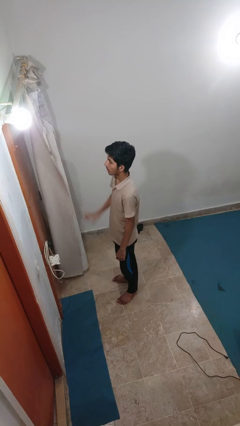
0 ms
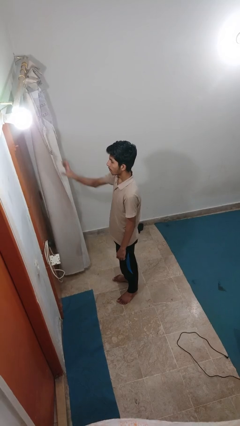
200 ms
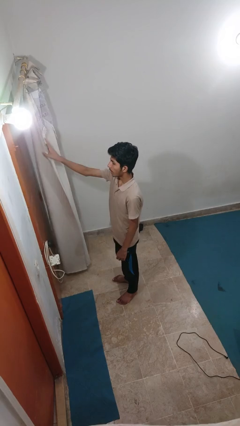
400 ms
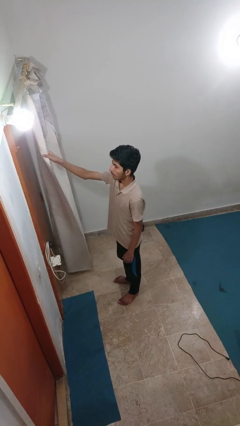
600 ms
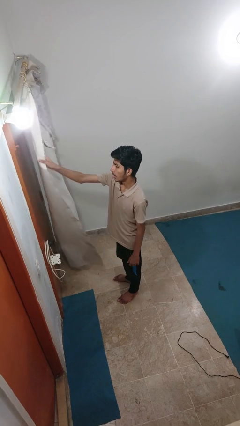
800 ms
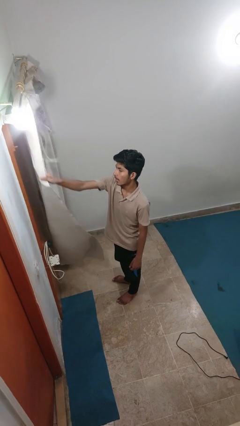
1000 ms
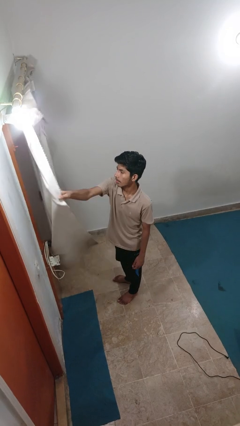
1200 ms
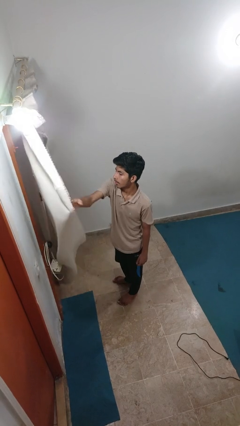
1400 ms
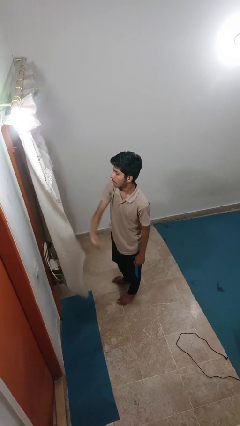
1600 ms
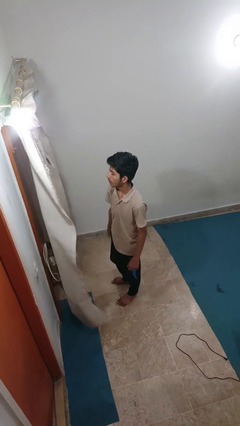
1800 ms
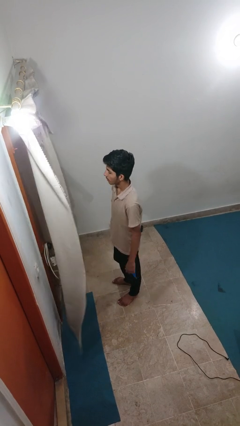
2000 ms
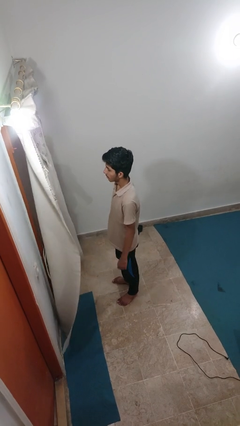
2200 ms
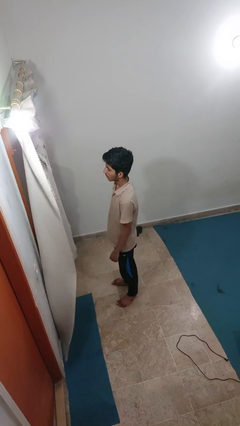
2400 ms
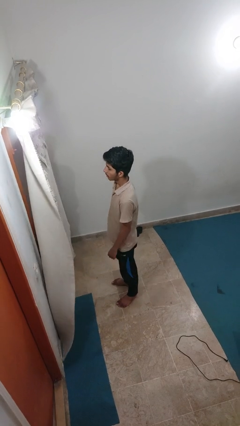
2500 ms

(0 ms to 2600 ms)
person closes curtains

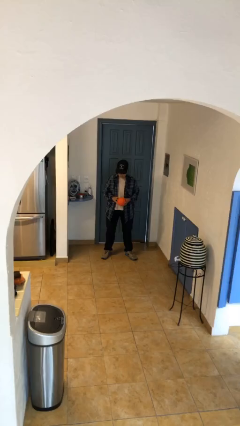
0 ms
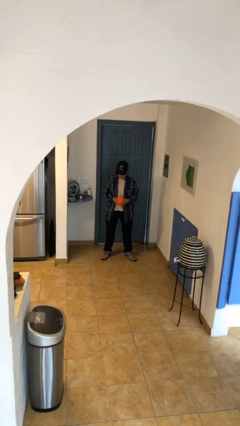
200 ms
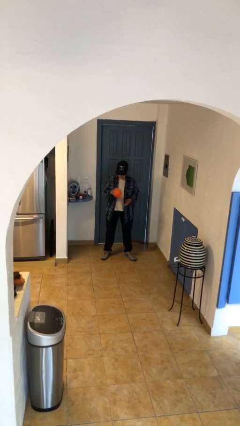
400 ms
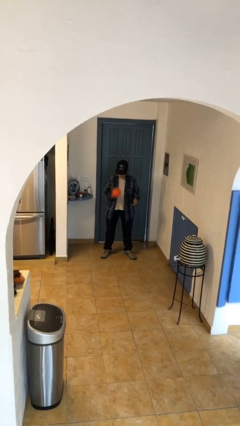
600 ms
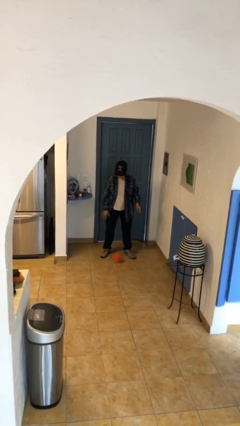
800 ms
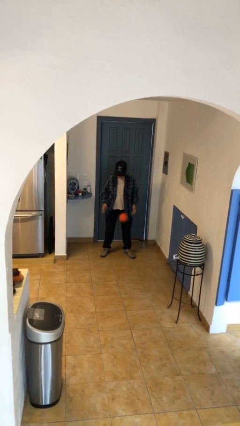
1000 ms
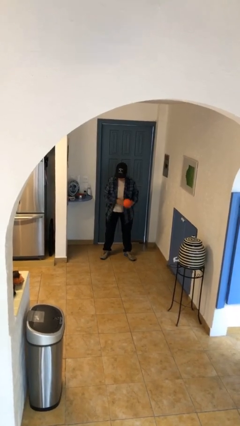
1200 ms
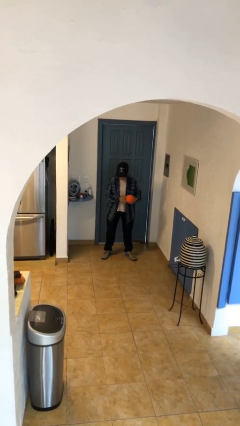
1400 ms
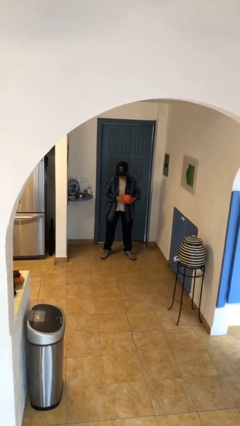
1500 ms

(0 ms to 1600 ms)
person bounces ball on floor

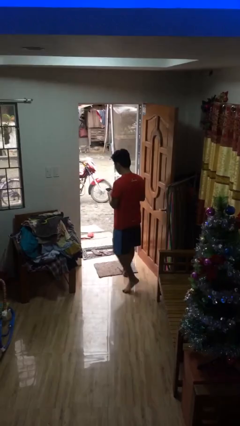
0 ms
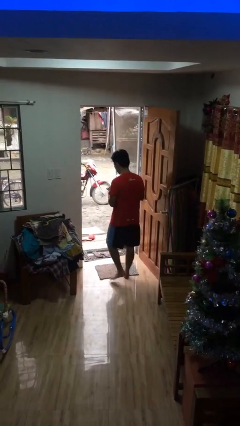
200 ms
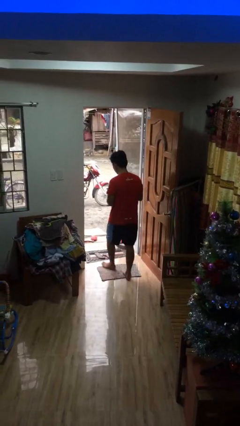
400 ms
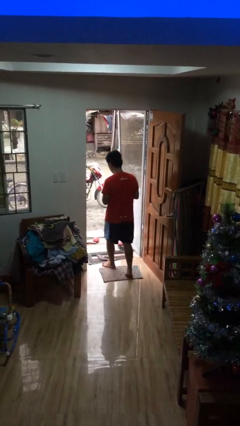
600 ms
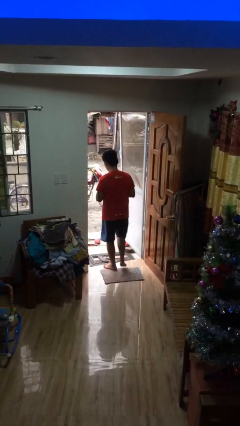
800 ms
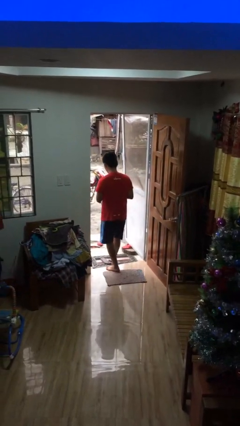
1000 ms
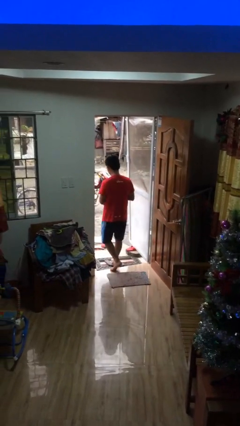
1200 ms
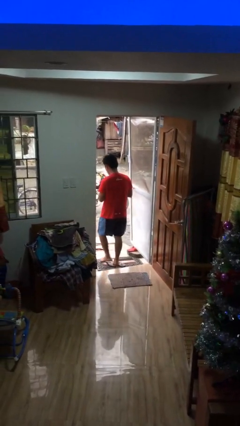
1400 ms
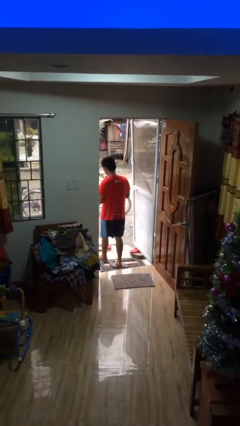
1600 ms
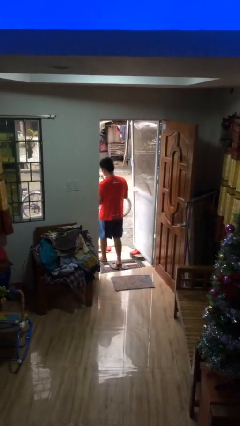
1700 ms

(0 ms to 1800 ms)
person exits scene through structure

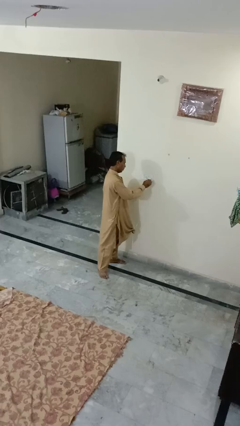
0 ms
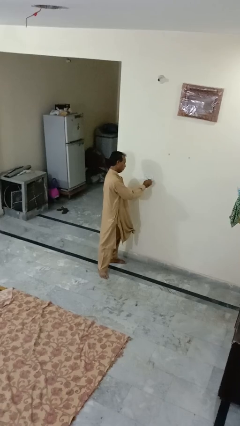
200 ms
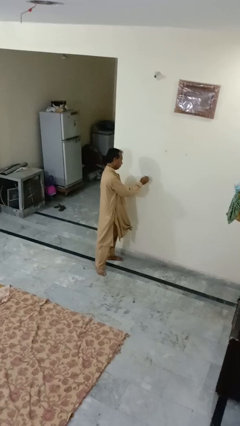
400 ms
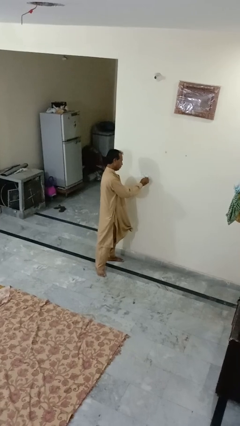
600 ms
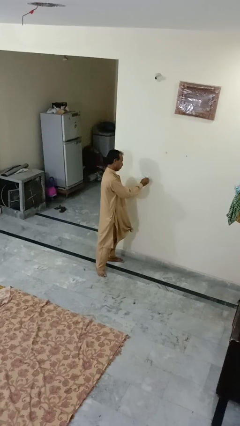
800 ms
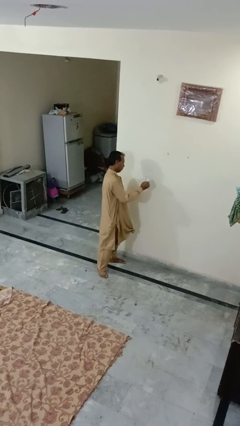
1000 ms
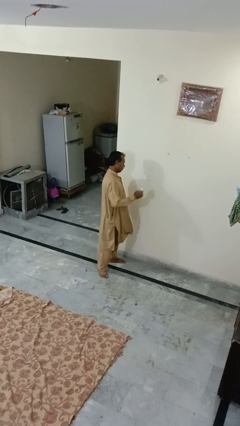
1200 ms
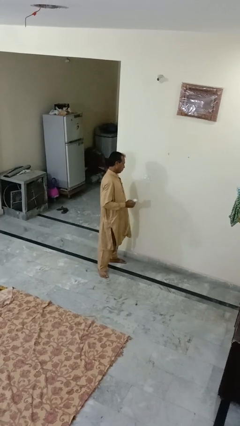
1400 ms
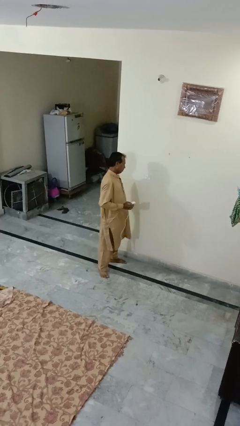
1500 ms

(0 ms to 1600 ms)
person unplugs from electrical socket

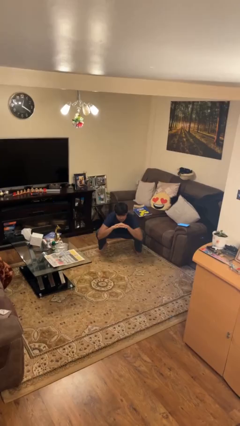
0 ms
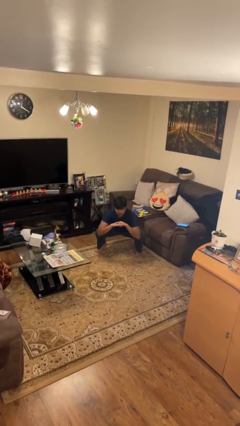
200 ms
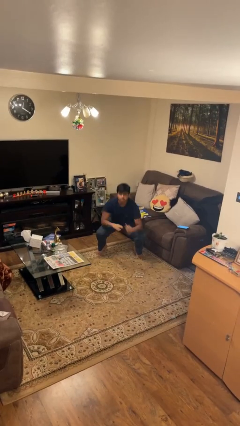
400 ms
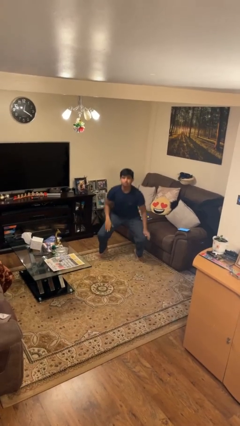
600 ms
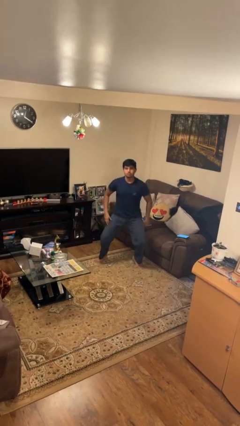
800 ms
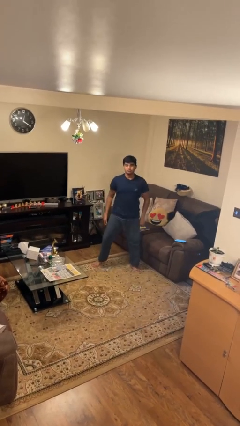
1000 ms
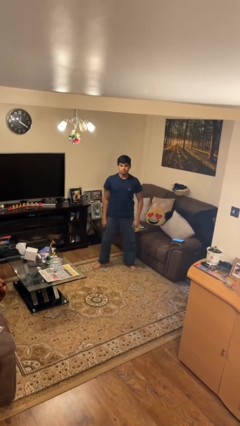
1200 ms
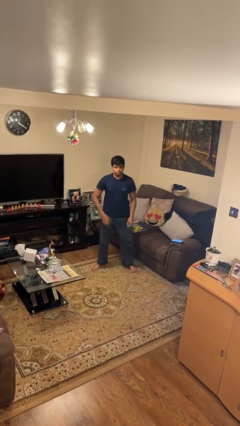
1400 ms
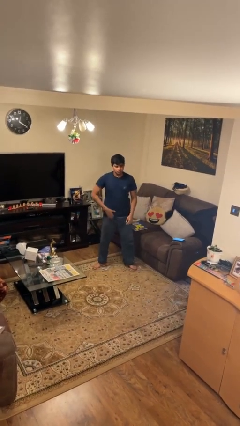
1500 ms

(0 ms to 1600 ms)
person stands up

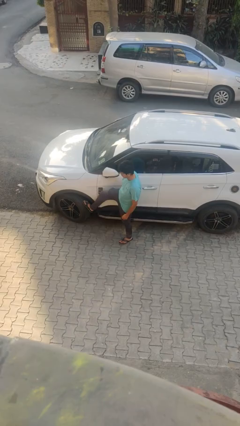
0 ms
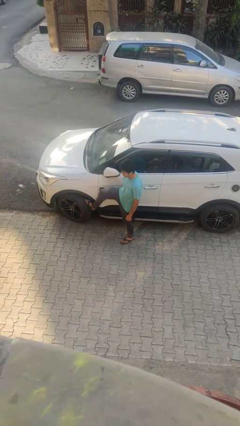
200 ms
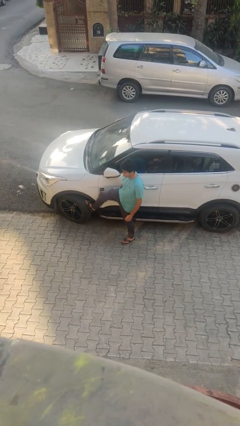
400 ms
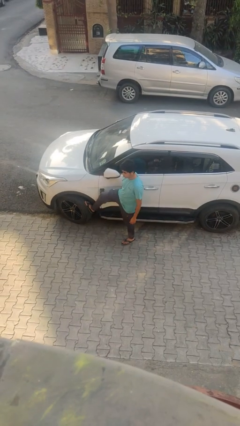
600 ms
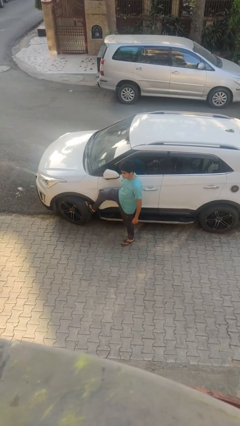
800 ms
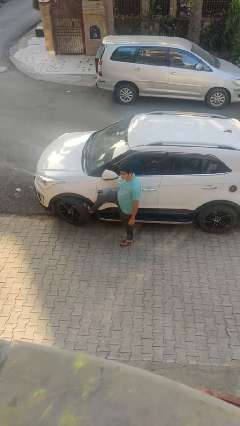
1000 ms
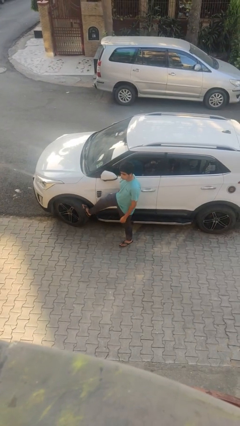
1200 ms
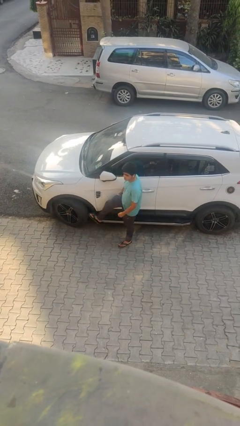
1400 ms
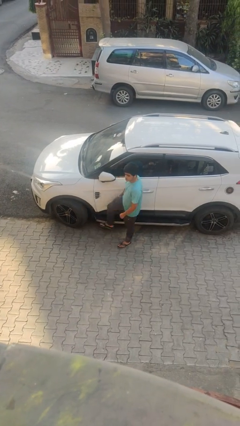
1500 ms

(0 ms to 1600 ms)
person kicks car tires

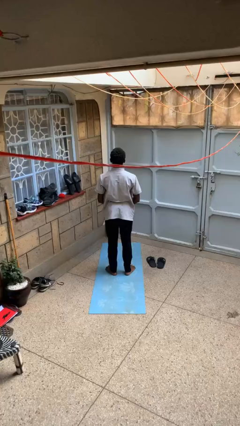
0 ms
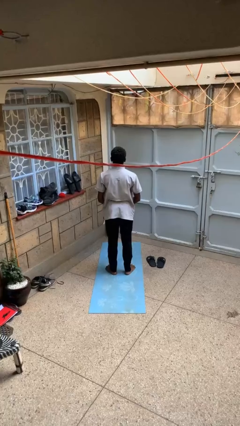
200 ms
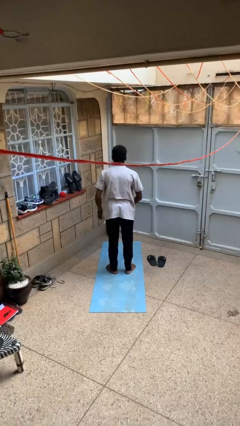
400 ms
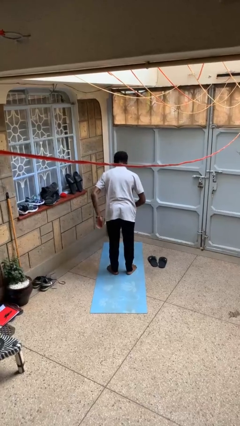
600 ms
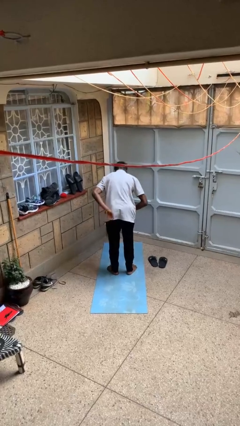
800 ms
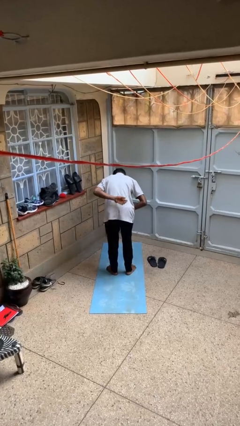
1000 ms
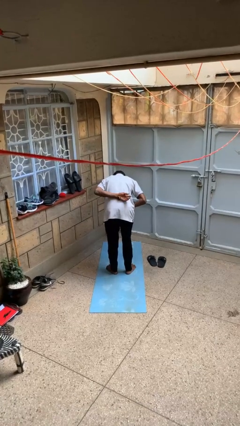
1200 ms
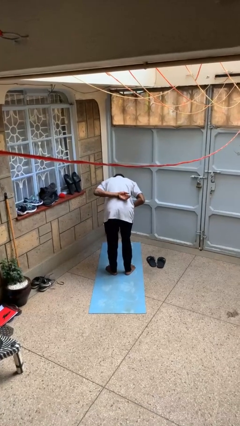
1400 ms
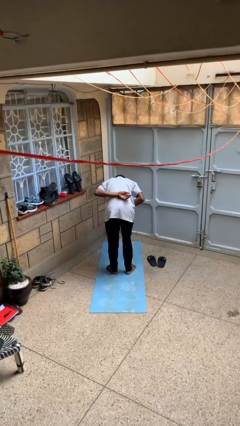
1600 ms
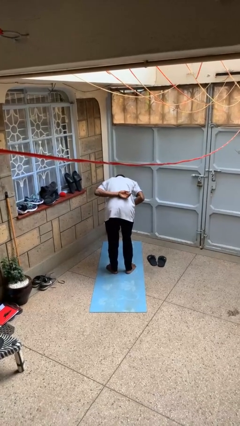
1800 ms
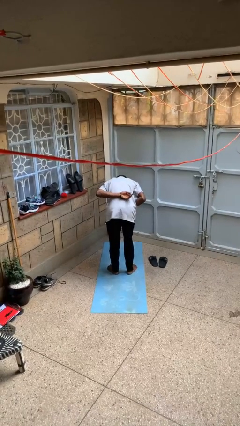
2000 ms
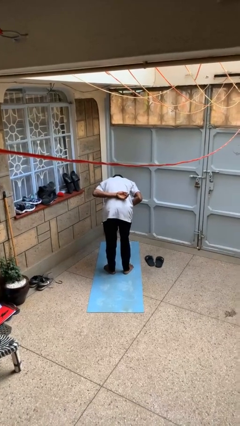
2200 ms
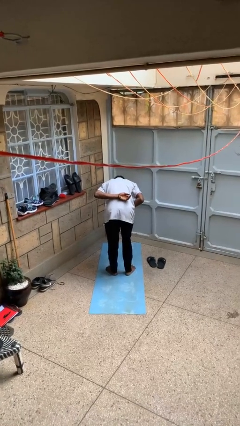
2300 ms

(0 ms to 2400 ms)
person bows

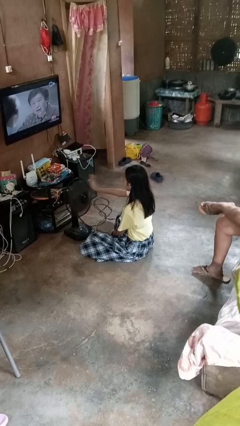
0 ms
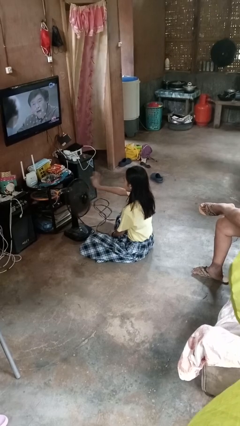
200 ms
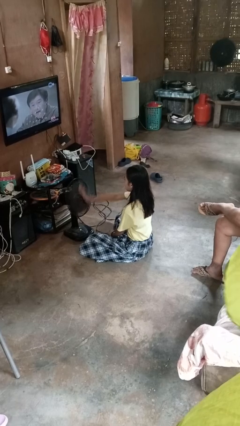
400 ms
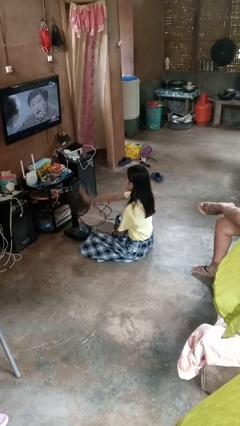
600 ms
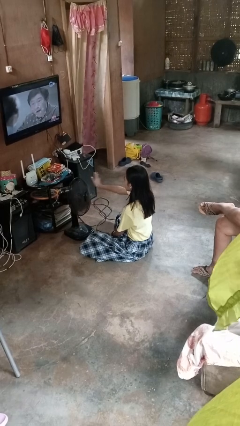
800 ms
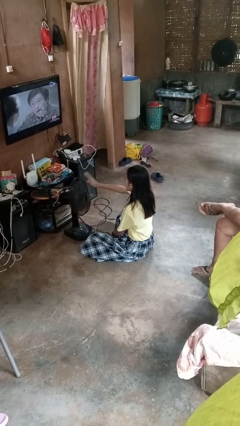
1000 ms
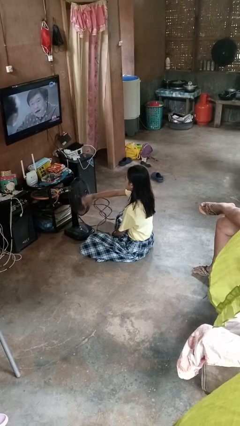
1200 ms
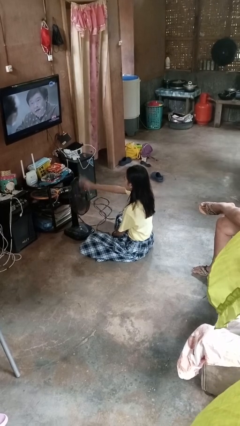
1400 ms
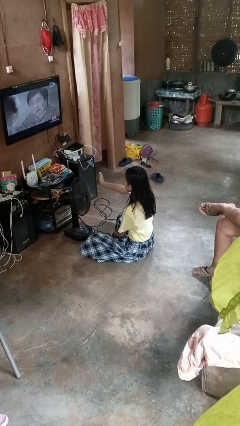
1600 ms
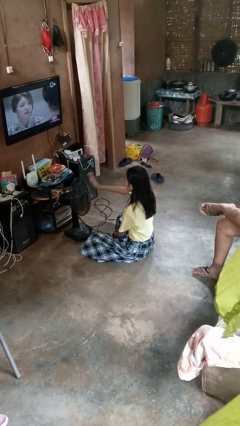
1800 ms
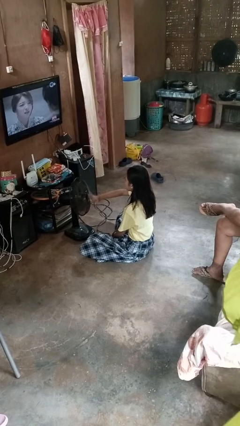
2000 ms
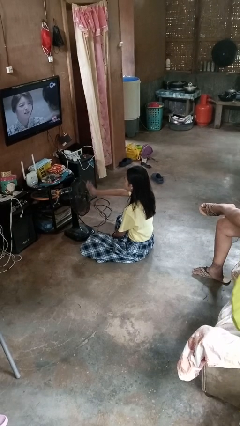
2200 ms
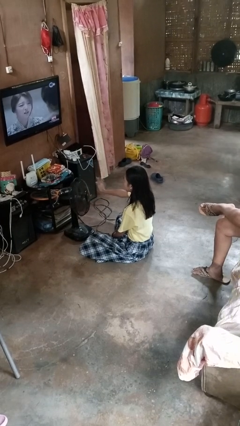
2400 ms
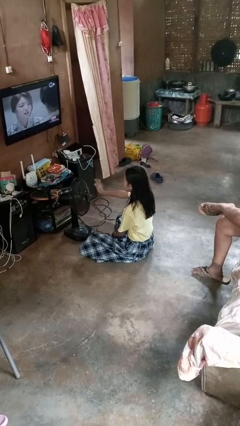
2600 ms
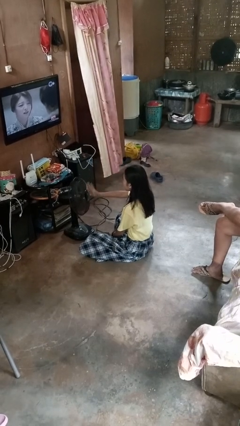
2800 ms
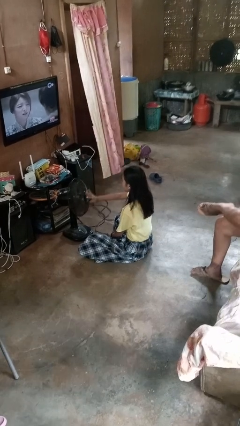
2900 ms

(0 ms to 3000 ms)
person waves hand over object
